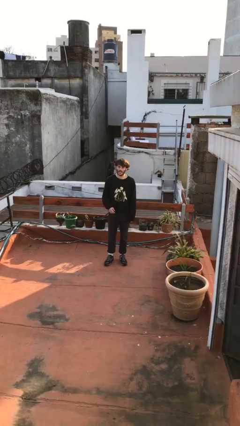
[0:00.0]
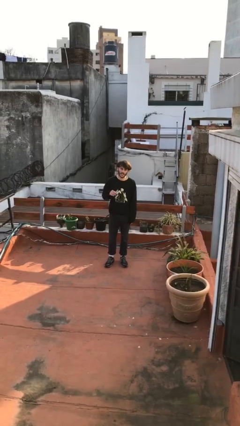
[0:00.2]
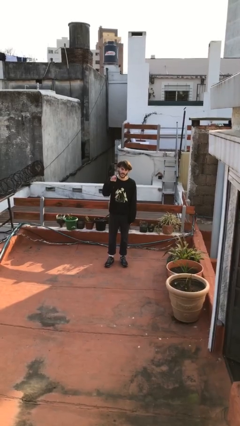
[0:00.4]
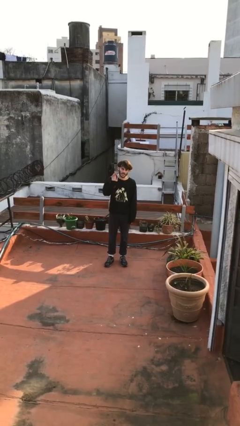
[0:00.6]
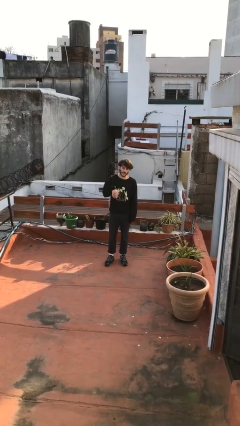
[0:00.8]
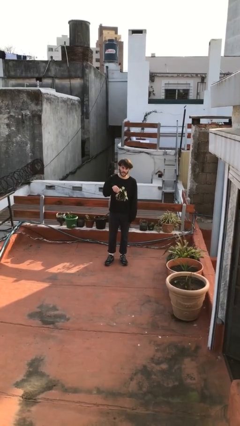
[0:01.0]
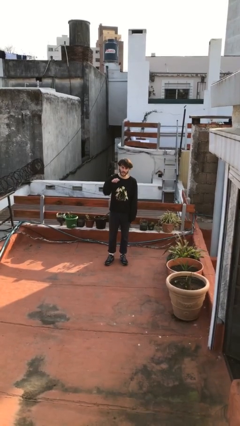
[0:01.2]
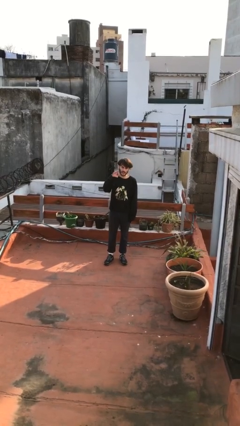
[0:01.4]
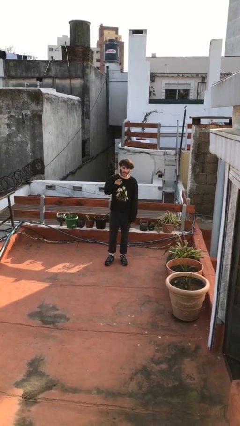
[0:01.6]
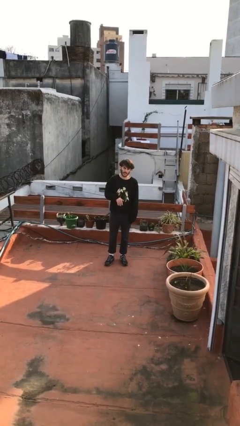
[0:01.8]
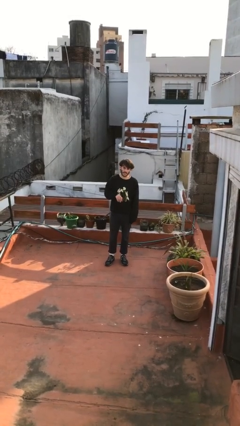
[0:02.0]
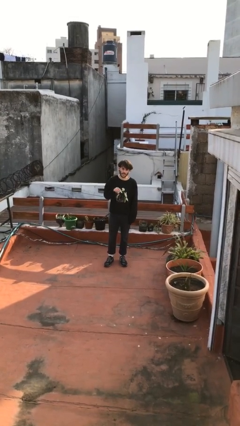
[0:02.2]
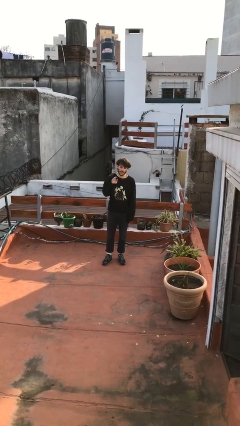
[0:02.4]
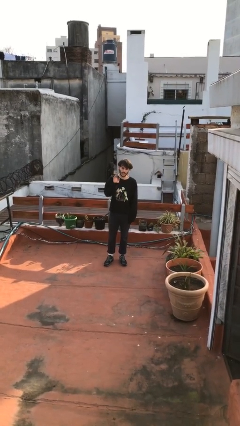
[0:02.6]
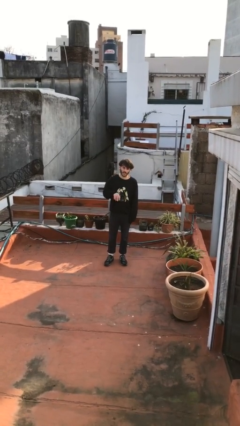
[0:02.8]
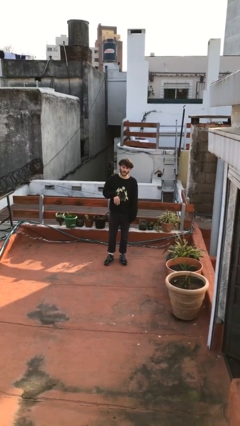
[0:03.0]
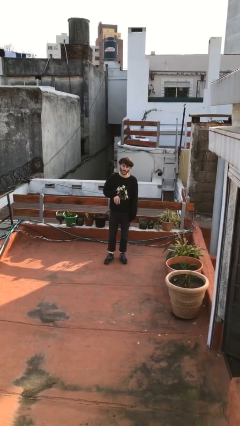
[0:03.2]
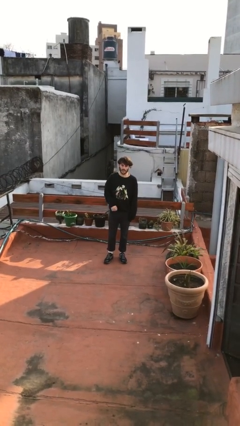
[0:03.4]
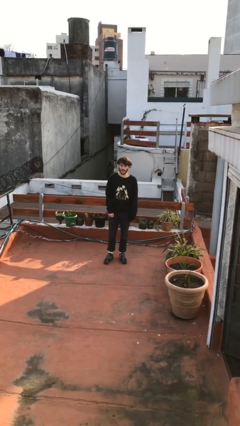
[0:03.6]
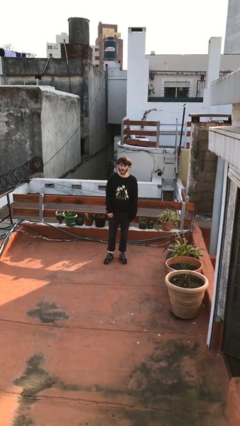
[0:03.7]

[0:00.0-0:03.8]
person gestures swipe down

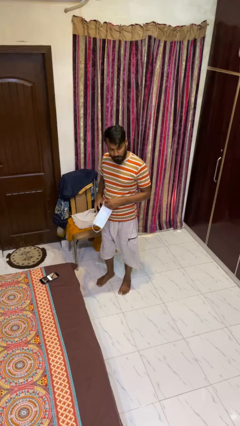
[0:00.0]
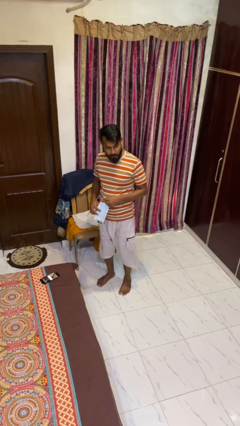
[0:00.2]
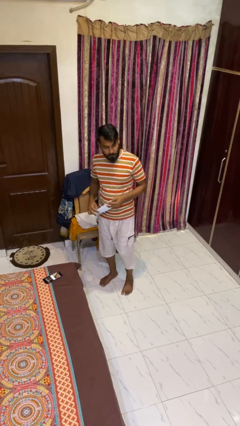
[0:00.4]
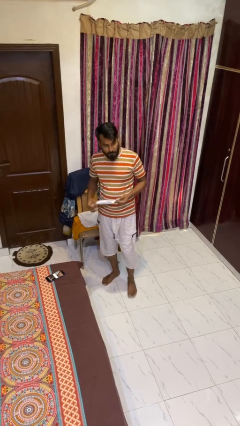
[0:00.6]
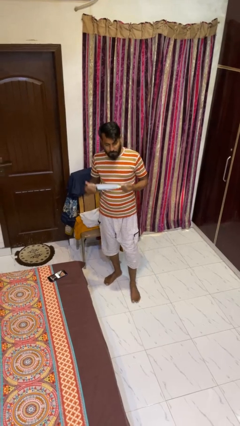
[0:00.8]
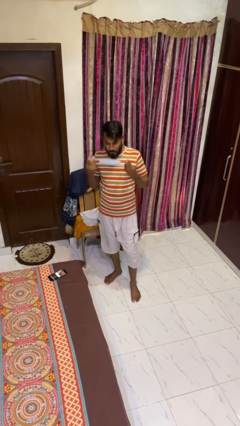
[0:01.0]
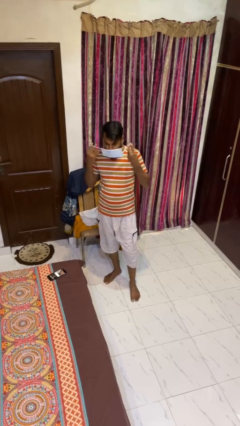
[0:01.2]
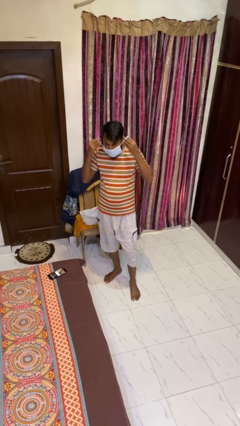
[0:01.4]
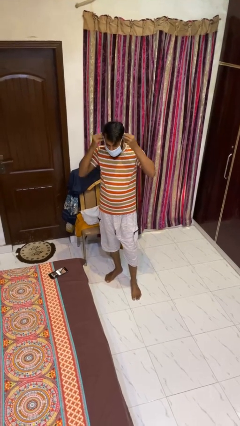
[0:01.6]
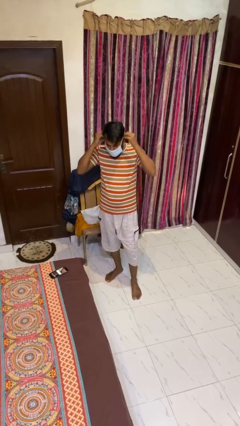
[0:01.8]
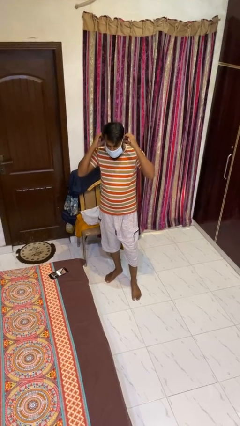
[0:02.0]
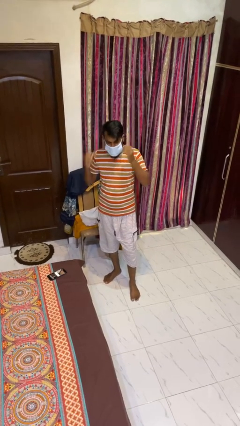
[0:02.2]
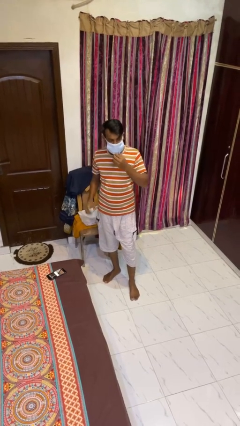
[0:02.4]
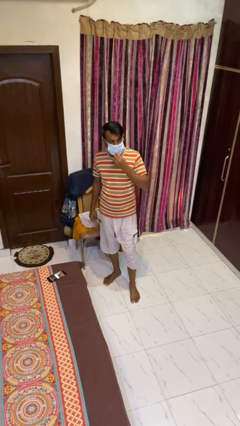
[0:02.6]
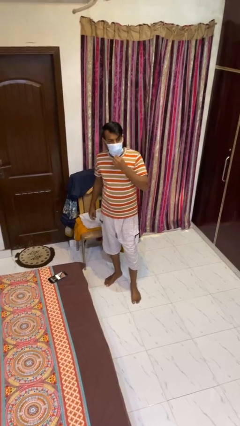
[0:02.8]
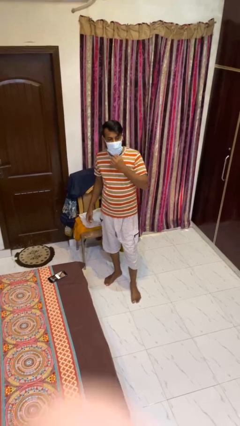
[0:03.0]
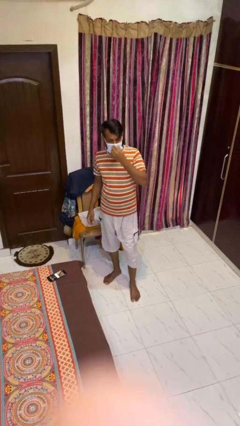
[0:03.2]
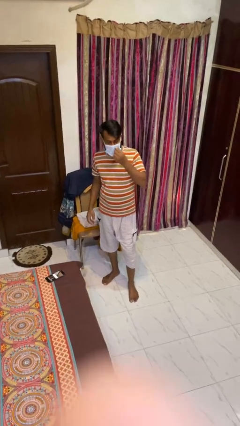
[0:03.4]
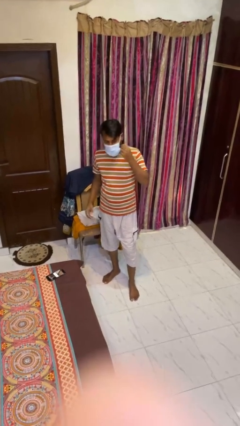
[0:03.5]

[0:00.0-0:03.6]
person puts on facemask

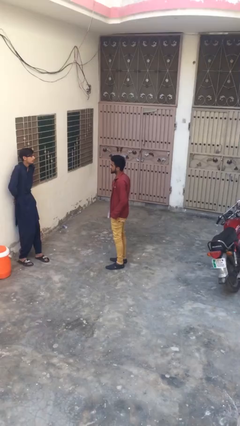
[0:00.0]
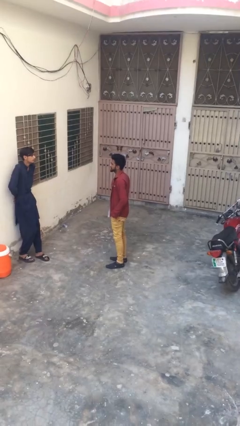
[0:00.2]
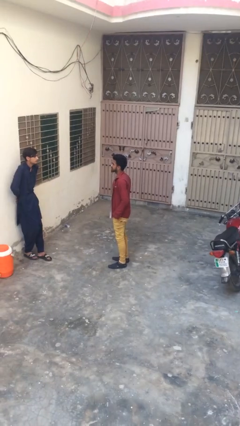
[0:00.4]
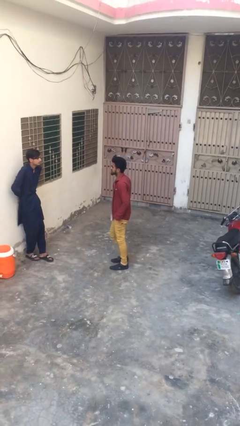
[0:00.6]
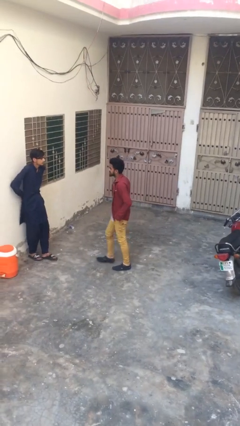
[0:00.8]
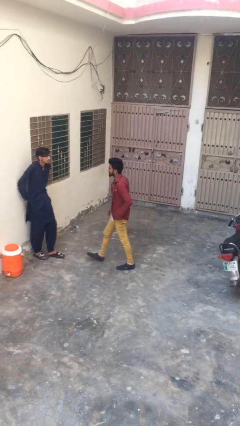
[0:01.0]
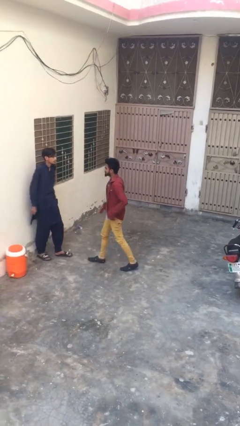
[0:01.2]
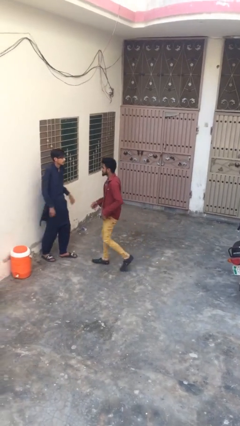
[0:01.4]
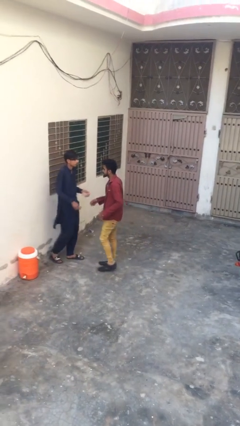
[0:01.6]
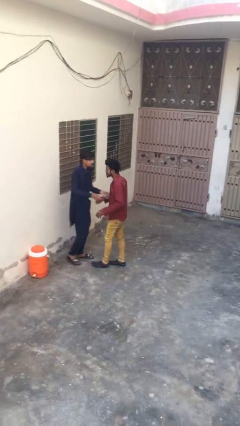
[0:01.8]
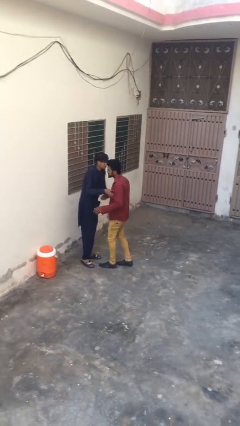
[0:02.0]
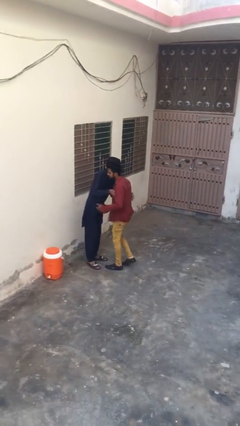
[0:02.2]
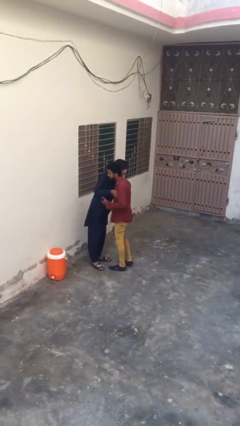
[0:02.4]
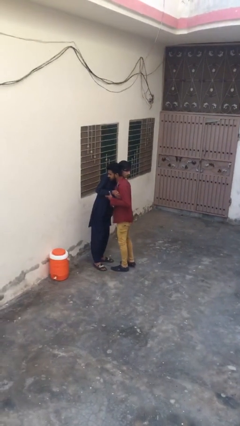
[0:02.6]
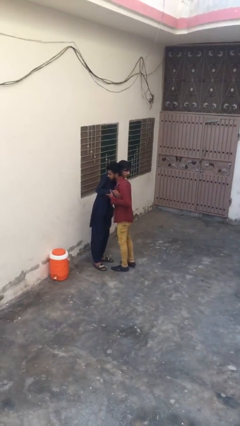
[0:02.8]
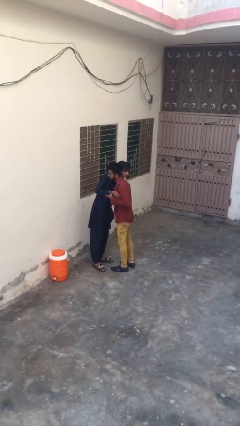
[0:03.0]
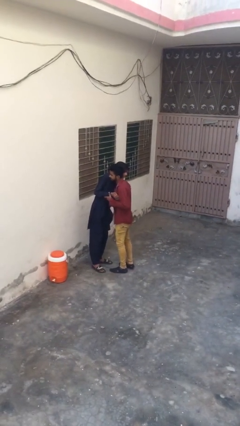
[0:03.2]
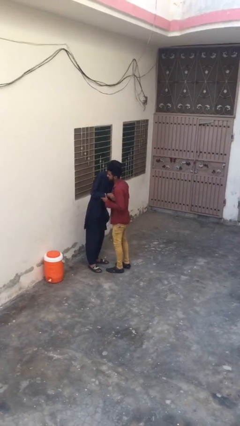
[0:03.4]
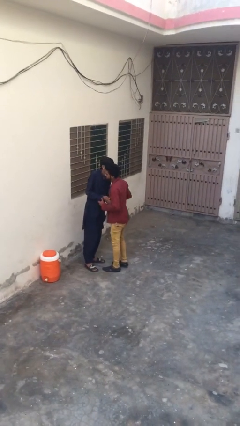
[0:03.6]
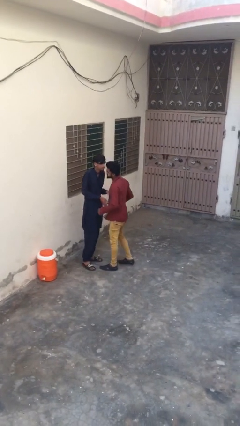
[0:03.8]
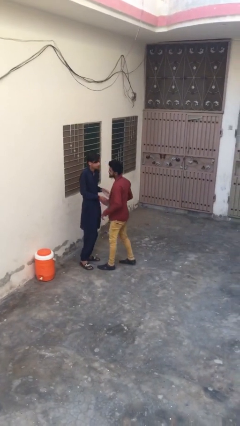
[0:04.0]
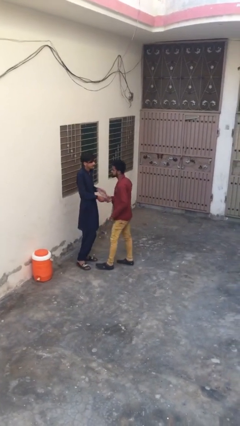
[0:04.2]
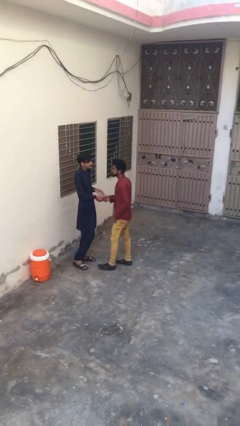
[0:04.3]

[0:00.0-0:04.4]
person embraces person

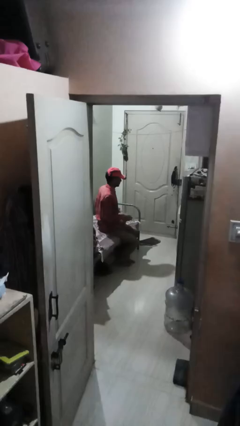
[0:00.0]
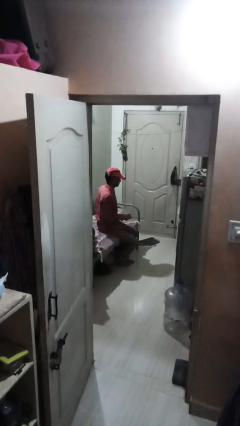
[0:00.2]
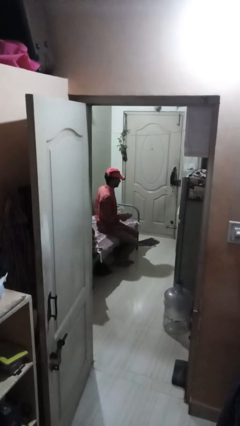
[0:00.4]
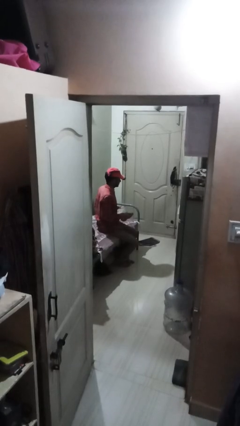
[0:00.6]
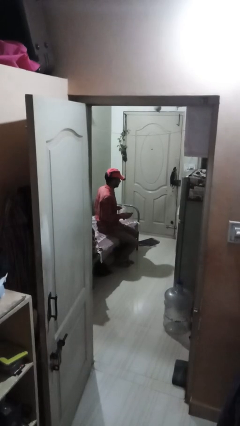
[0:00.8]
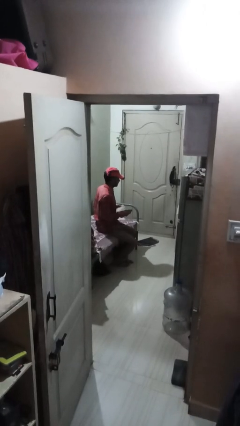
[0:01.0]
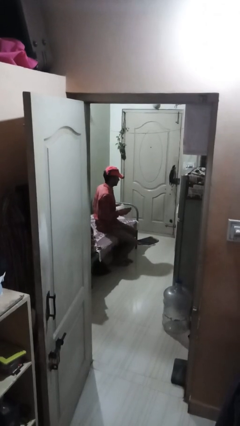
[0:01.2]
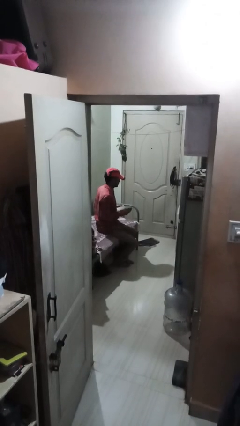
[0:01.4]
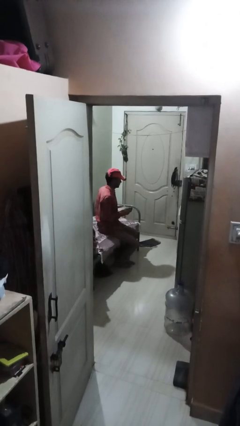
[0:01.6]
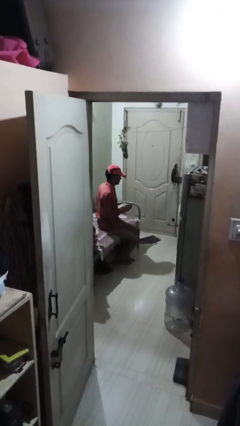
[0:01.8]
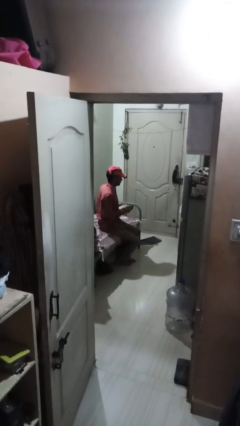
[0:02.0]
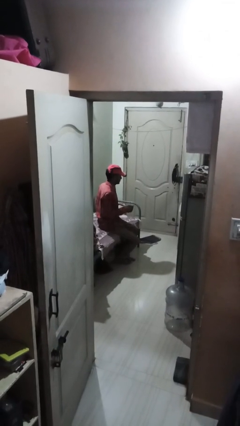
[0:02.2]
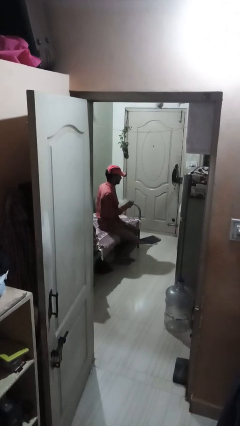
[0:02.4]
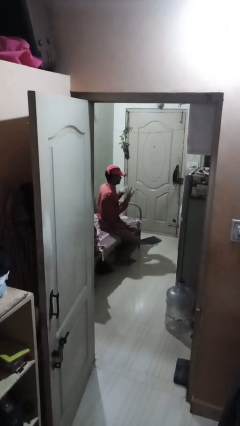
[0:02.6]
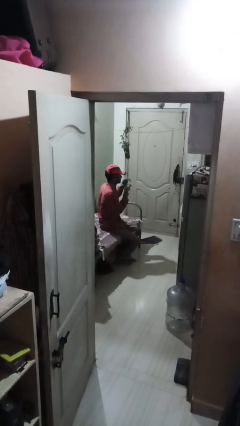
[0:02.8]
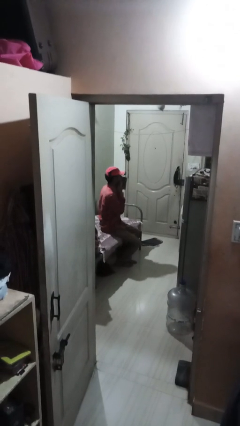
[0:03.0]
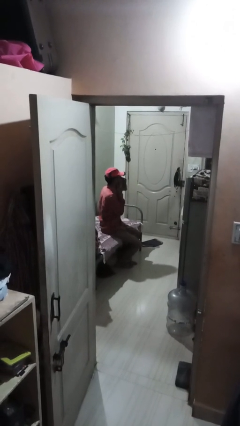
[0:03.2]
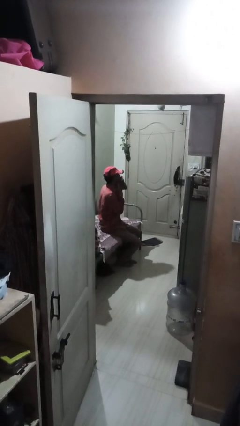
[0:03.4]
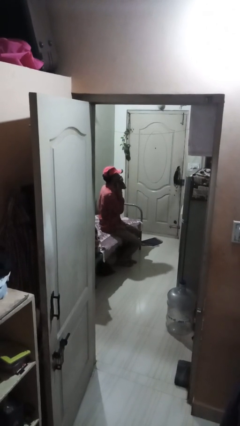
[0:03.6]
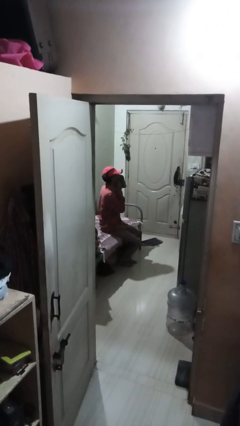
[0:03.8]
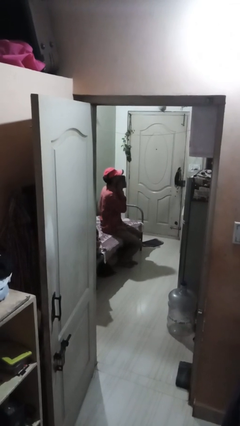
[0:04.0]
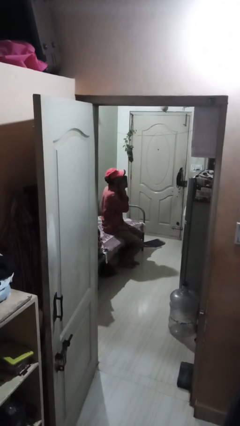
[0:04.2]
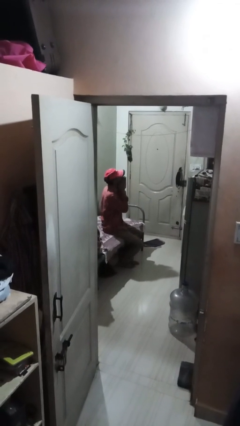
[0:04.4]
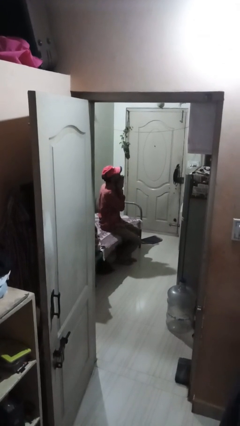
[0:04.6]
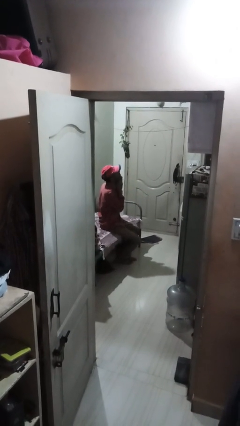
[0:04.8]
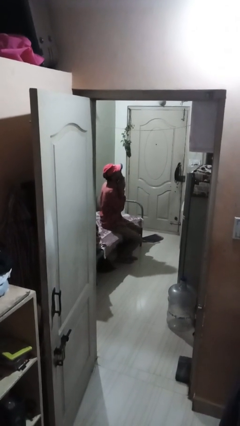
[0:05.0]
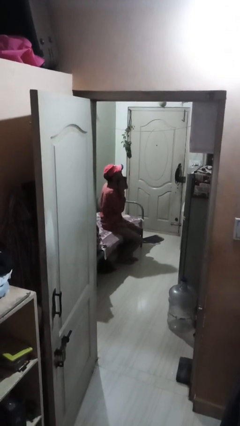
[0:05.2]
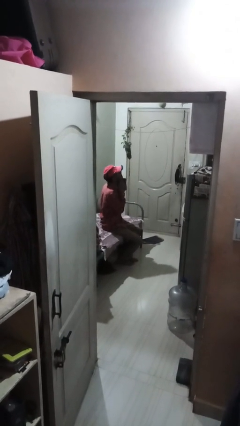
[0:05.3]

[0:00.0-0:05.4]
person wipes mouth with napkin

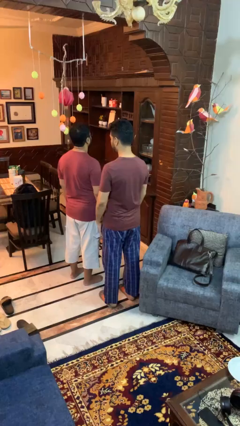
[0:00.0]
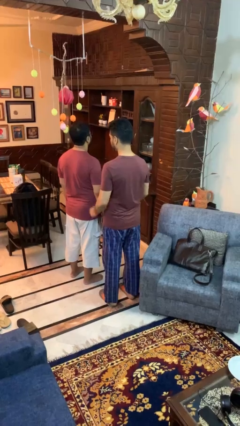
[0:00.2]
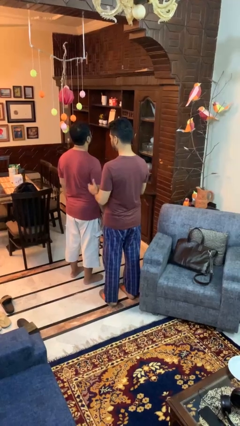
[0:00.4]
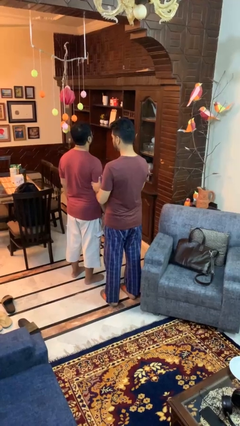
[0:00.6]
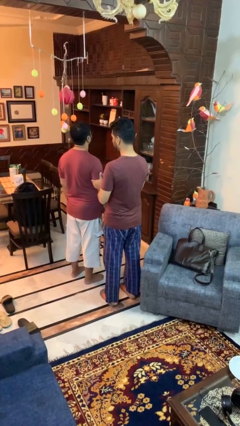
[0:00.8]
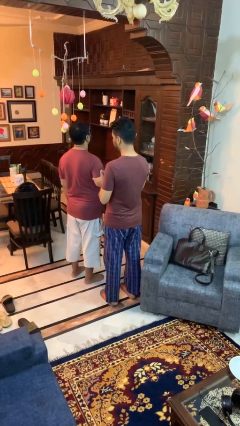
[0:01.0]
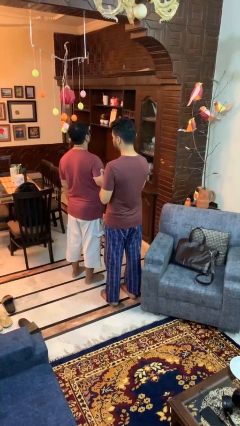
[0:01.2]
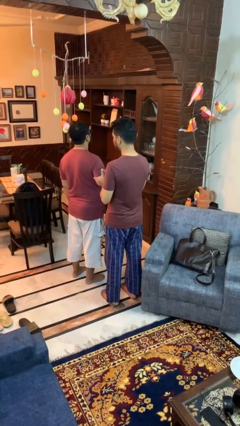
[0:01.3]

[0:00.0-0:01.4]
person grabs person by bicep
